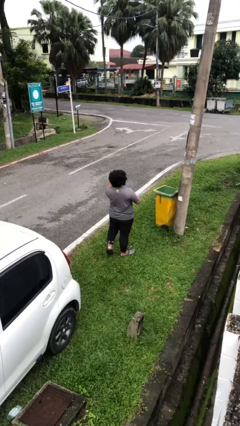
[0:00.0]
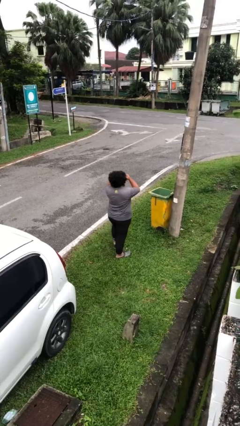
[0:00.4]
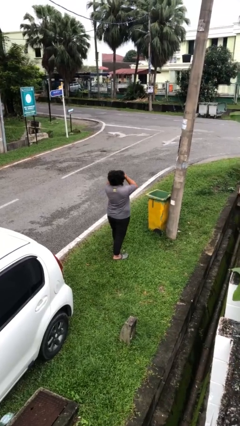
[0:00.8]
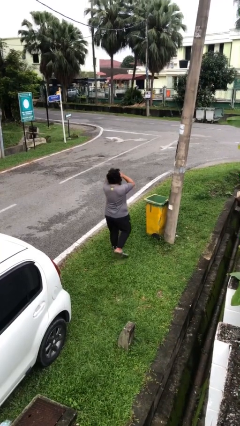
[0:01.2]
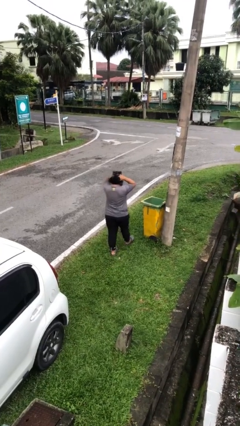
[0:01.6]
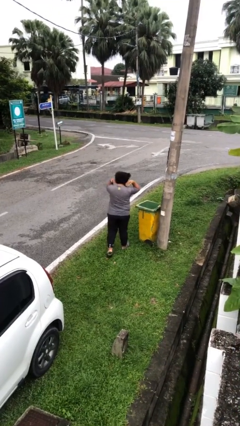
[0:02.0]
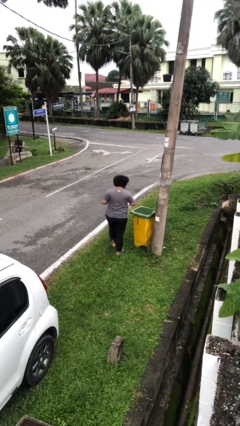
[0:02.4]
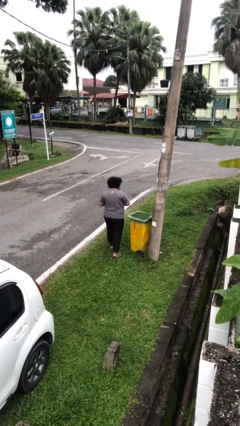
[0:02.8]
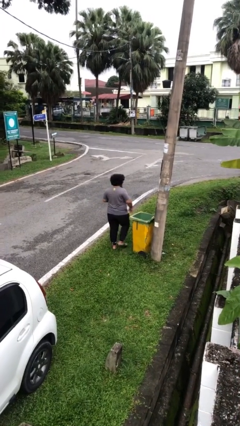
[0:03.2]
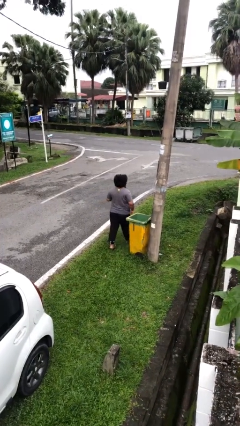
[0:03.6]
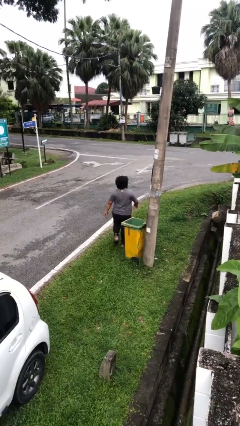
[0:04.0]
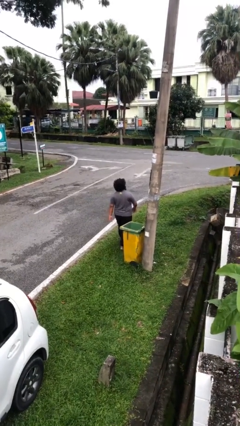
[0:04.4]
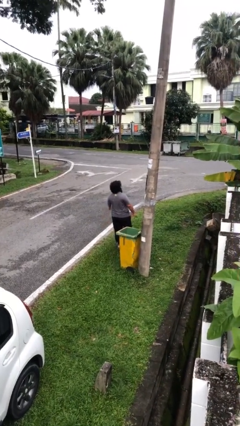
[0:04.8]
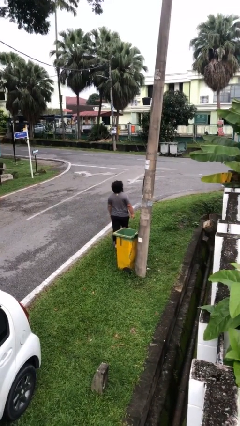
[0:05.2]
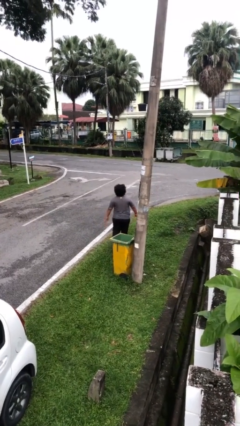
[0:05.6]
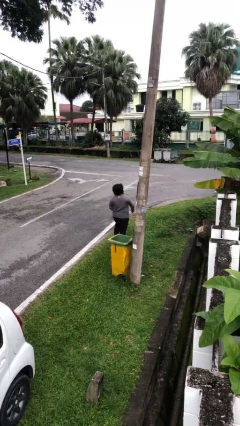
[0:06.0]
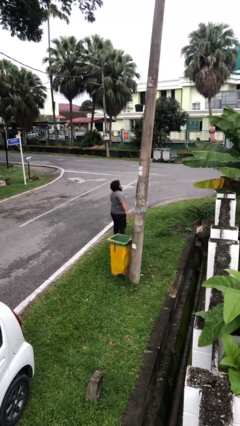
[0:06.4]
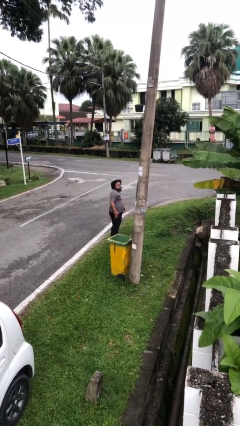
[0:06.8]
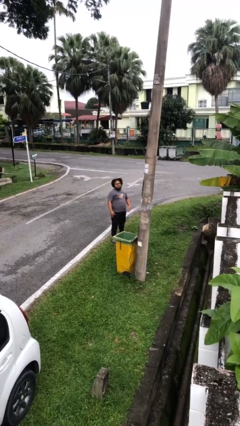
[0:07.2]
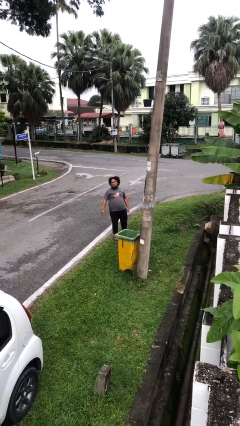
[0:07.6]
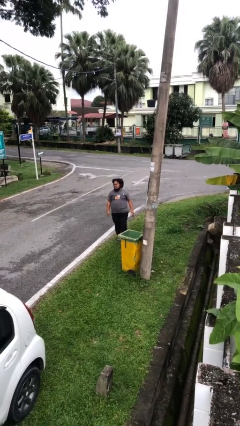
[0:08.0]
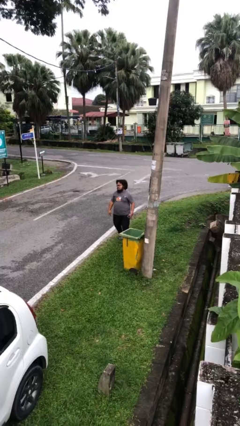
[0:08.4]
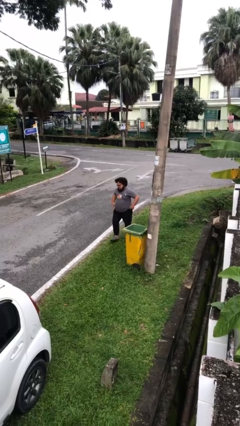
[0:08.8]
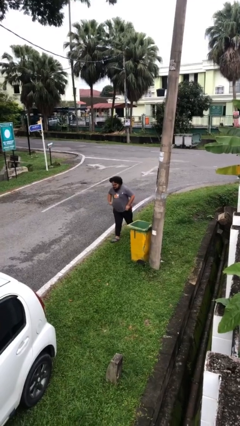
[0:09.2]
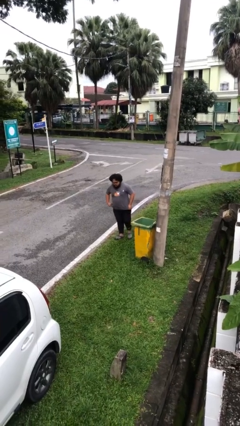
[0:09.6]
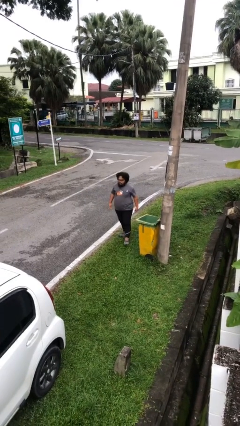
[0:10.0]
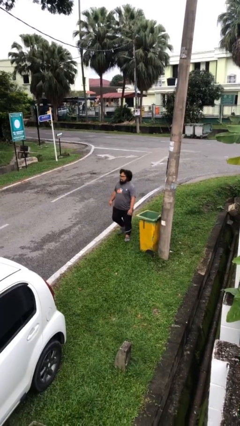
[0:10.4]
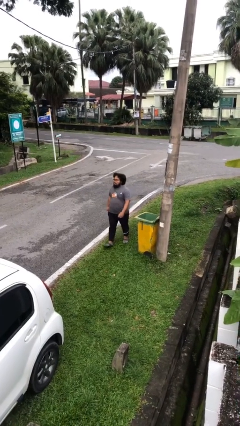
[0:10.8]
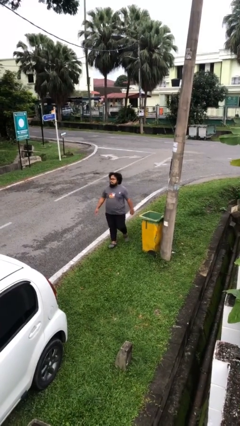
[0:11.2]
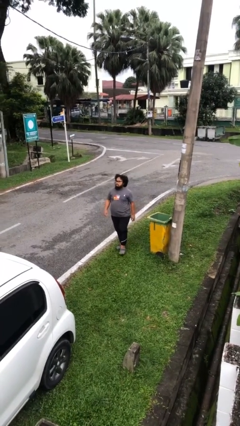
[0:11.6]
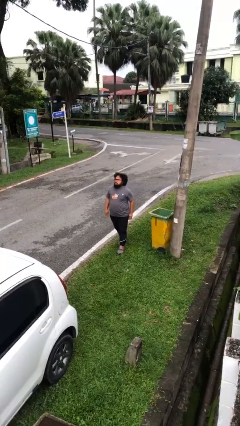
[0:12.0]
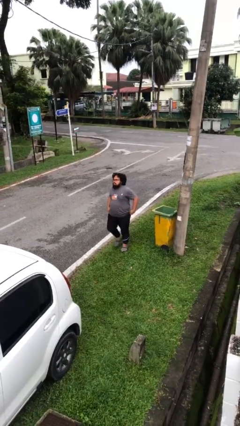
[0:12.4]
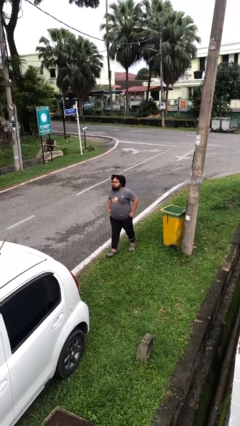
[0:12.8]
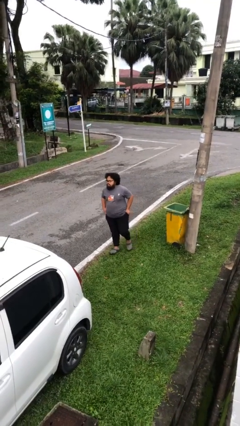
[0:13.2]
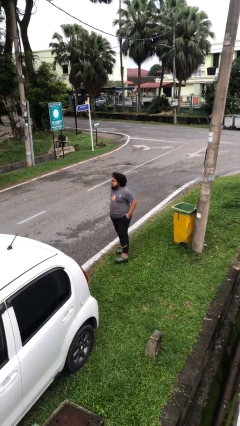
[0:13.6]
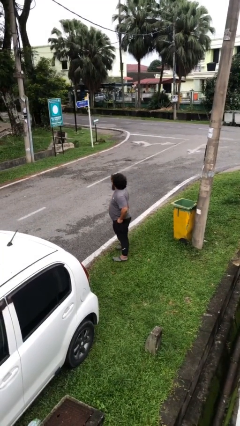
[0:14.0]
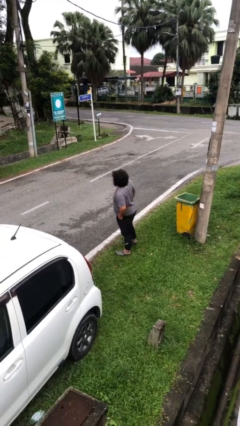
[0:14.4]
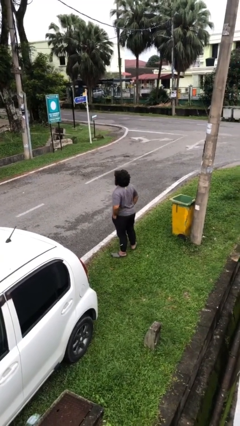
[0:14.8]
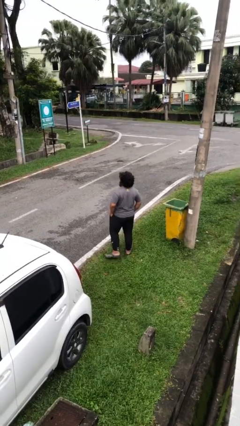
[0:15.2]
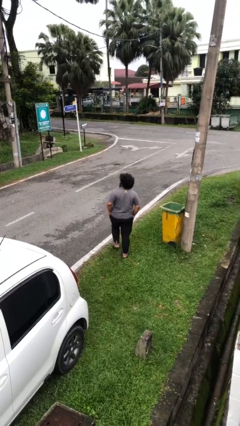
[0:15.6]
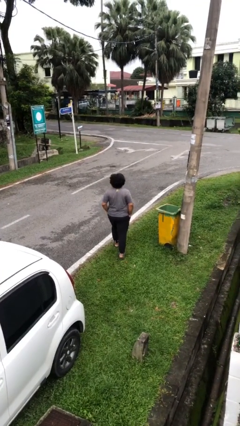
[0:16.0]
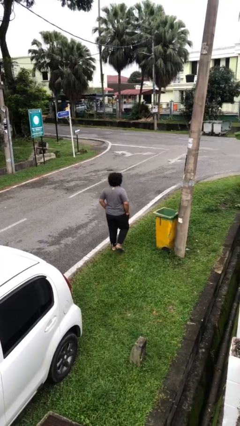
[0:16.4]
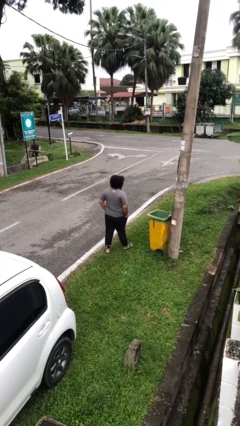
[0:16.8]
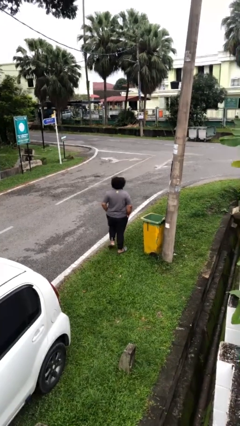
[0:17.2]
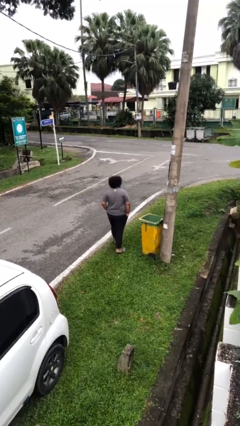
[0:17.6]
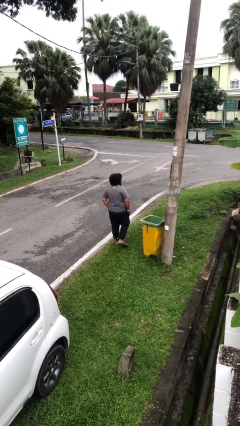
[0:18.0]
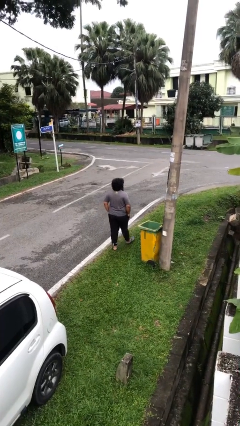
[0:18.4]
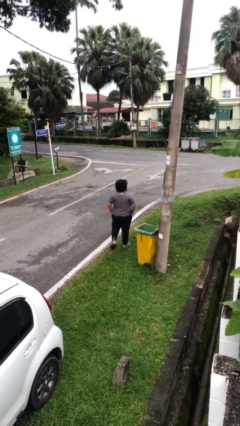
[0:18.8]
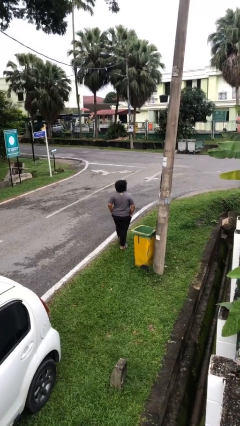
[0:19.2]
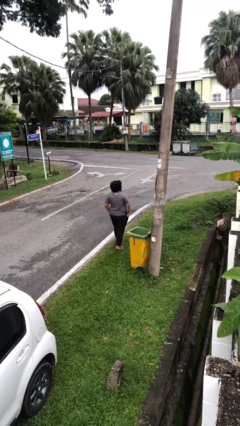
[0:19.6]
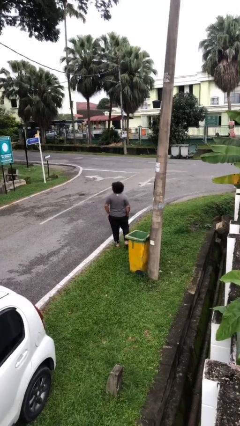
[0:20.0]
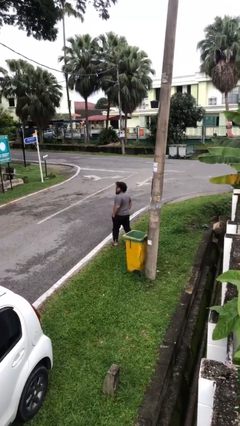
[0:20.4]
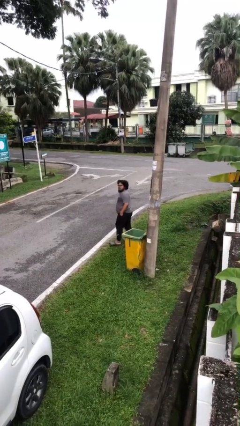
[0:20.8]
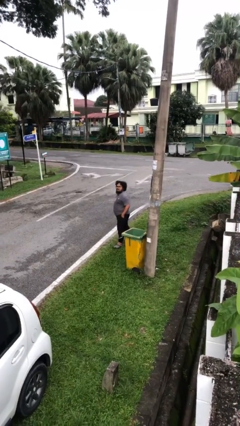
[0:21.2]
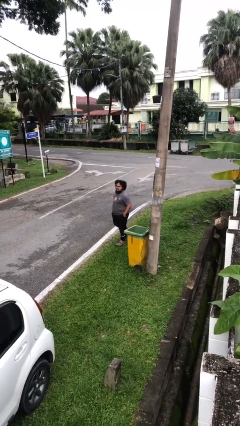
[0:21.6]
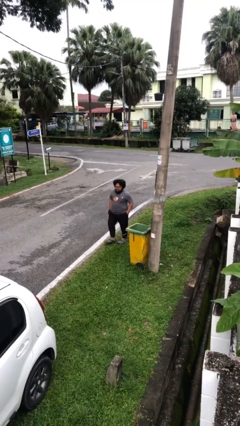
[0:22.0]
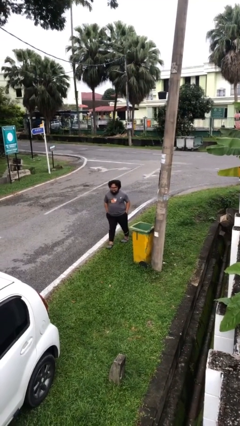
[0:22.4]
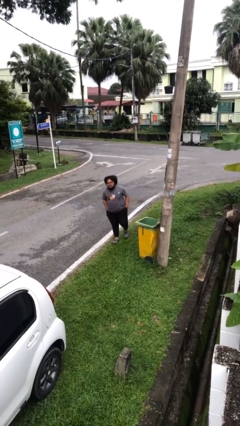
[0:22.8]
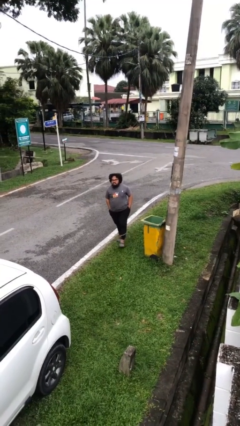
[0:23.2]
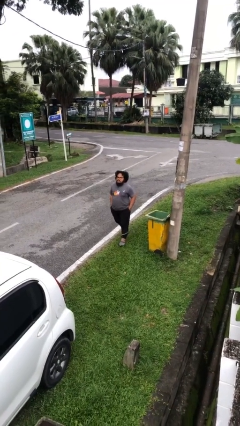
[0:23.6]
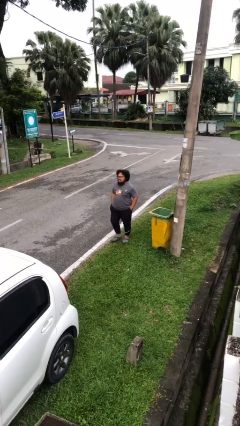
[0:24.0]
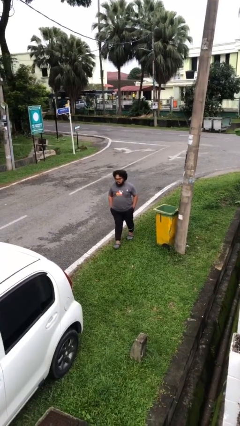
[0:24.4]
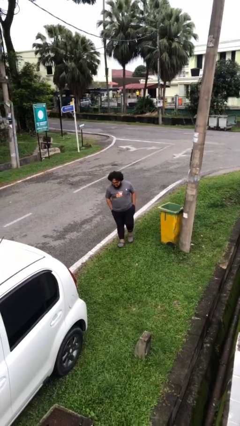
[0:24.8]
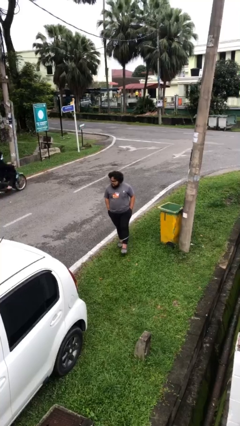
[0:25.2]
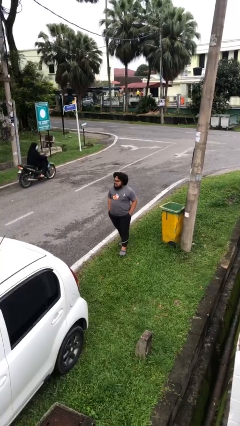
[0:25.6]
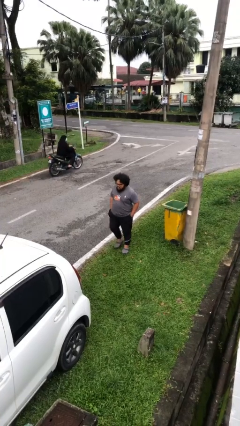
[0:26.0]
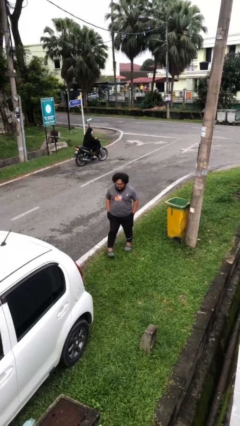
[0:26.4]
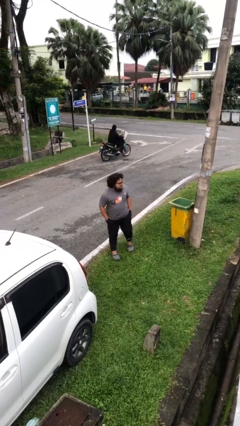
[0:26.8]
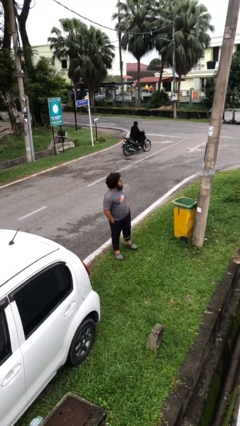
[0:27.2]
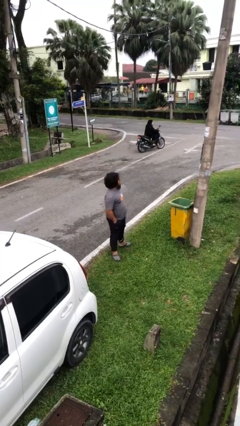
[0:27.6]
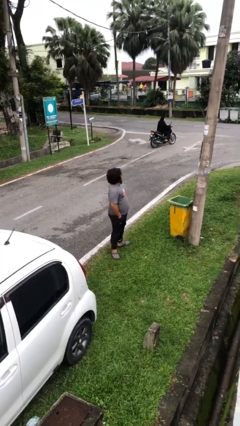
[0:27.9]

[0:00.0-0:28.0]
person walks

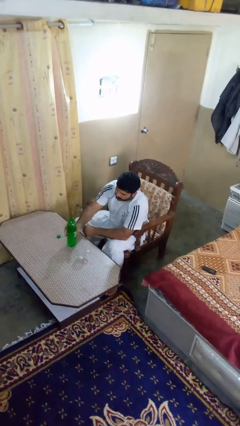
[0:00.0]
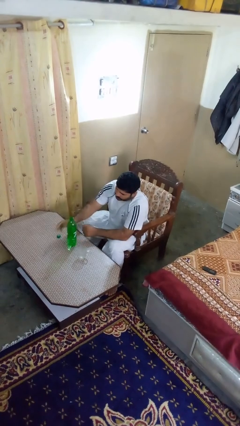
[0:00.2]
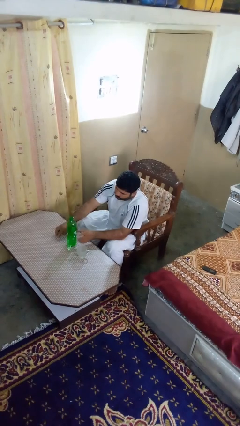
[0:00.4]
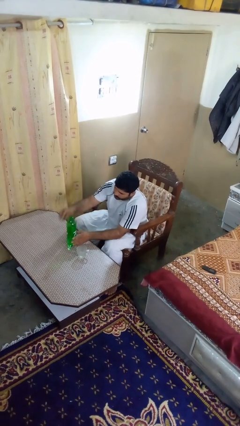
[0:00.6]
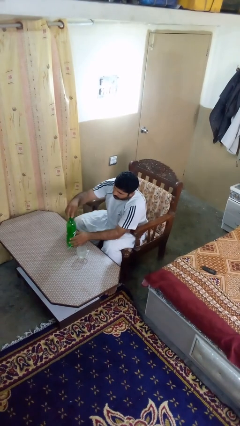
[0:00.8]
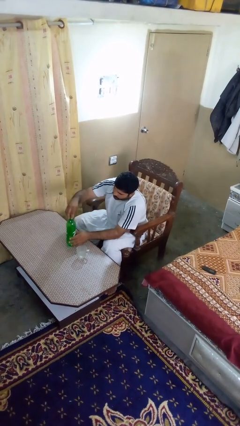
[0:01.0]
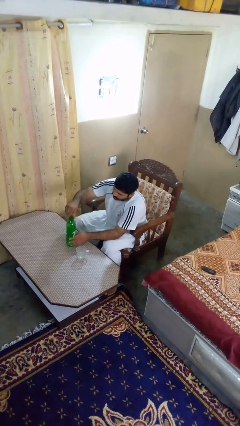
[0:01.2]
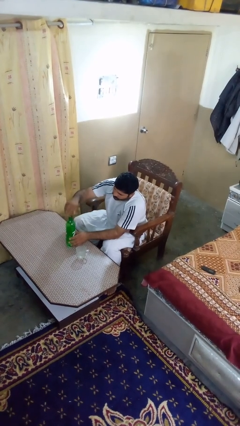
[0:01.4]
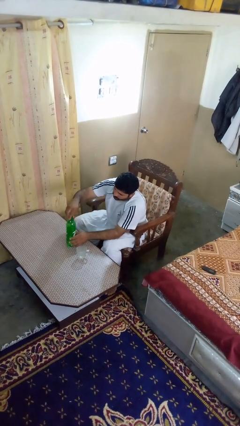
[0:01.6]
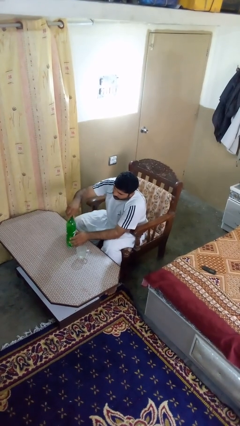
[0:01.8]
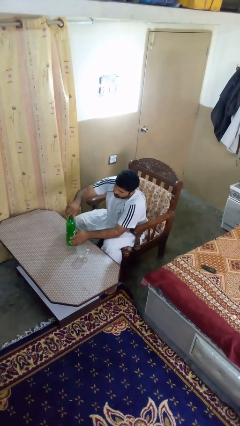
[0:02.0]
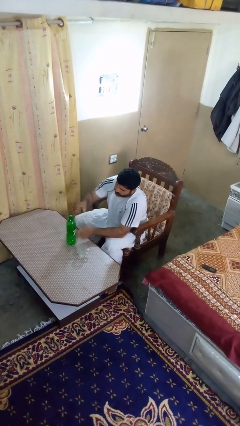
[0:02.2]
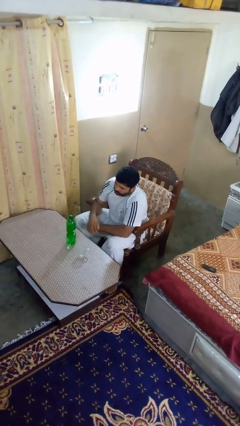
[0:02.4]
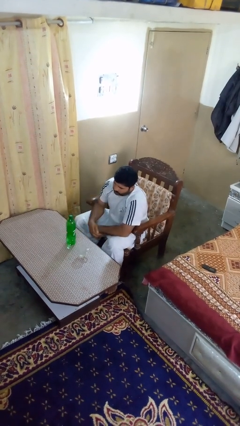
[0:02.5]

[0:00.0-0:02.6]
person screws lid to bottle

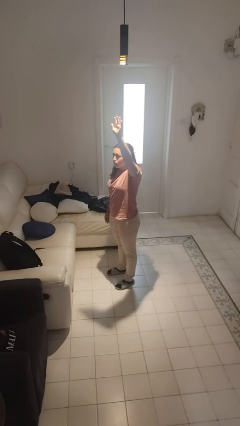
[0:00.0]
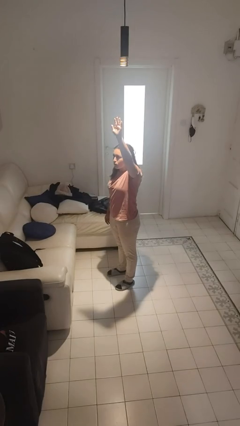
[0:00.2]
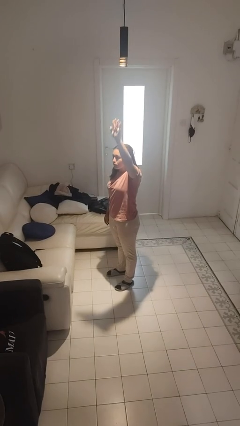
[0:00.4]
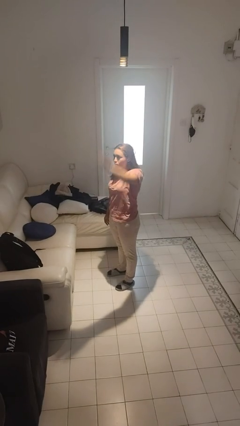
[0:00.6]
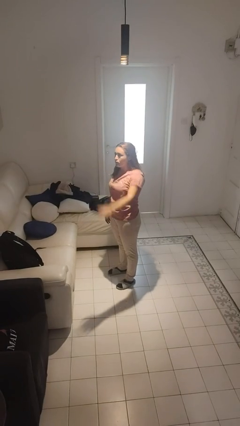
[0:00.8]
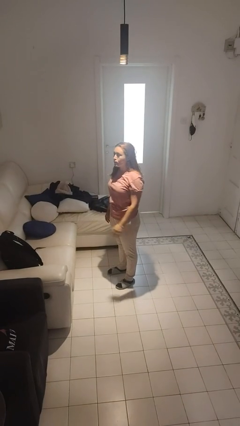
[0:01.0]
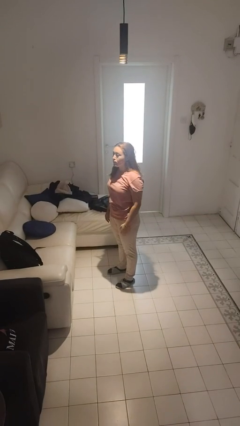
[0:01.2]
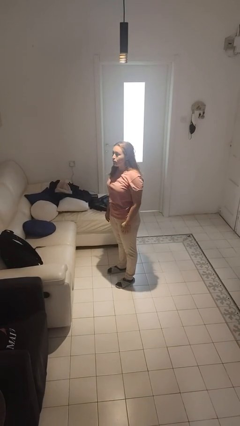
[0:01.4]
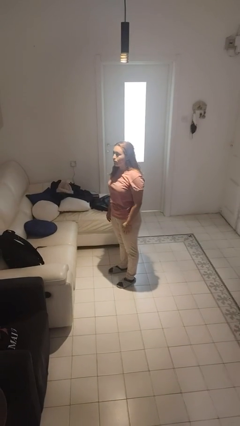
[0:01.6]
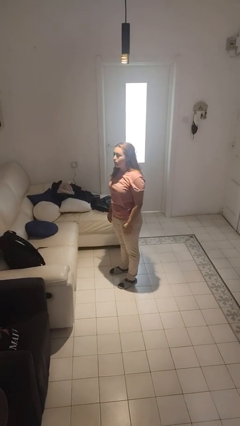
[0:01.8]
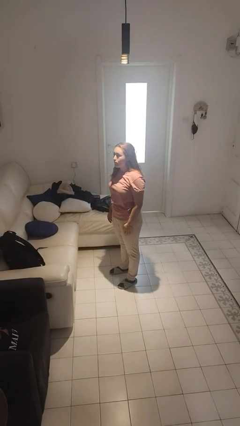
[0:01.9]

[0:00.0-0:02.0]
person gestures lower hand
